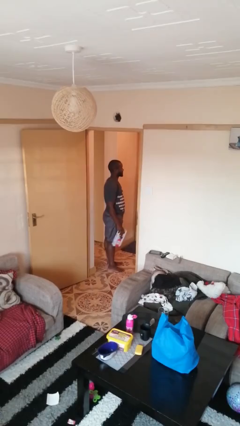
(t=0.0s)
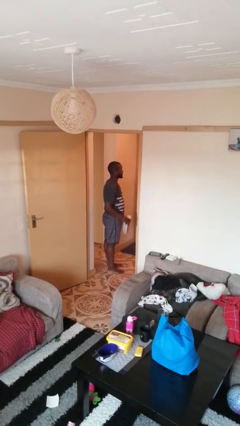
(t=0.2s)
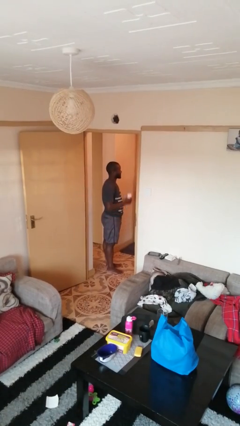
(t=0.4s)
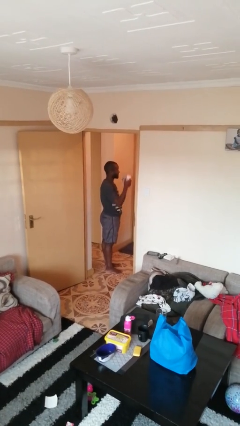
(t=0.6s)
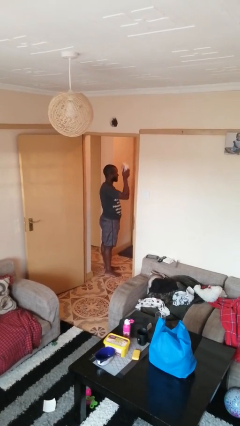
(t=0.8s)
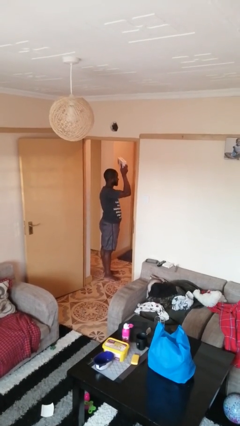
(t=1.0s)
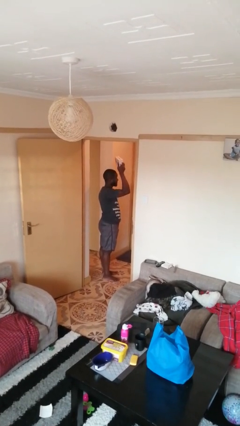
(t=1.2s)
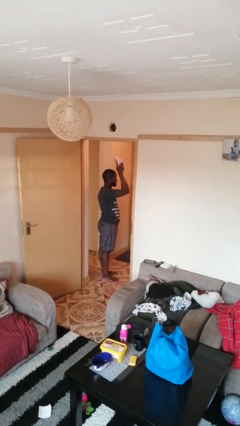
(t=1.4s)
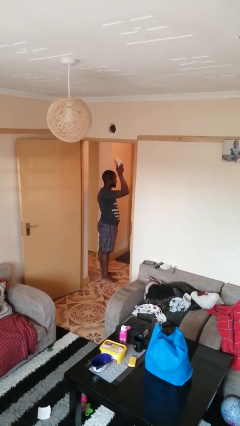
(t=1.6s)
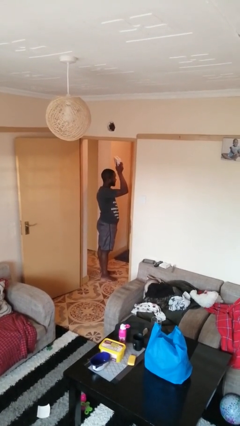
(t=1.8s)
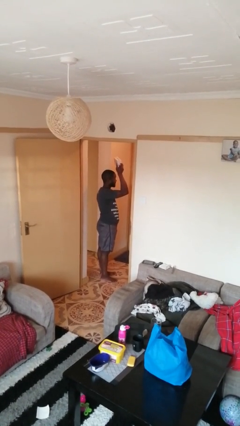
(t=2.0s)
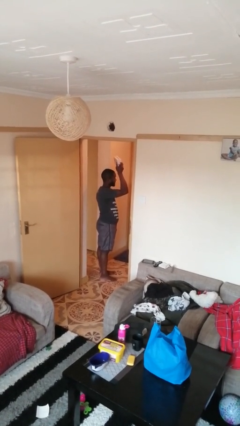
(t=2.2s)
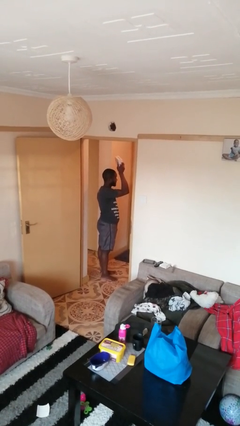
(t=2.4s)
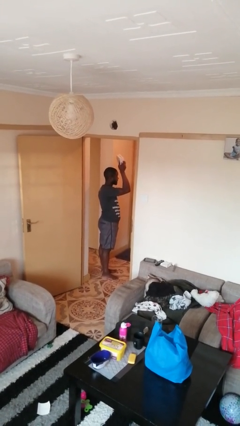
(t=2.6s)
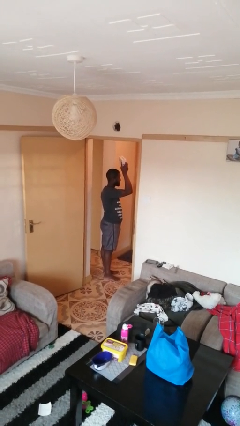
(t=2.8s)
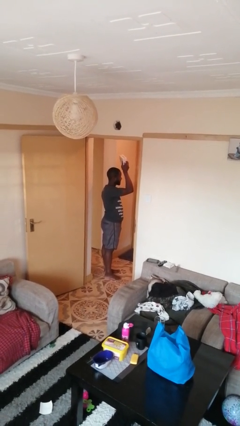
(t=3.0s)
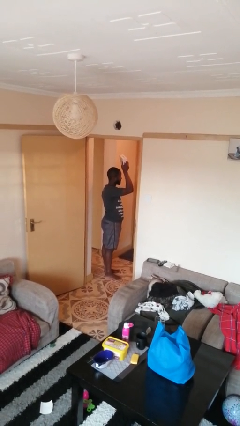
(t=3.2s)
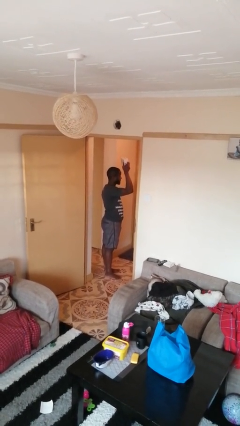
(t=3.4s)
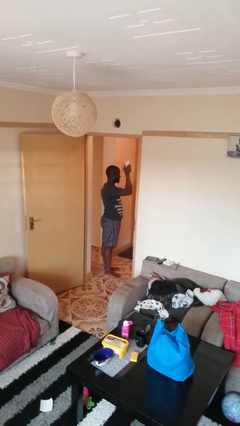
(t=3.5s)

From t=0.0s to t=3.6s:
person holds object above head

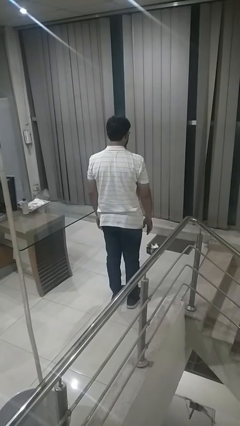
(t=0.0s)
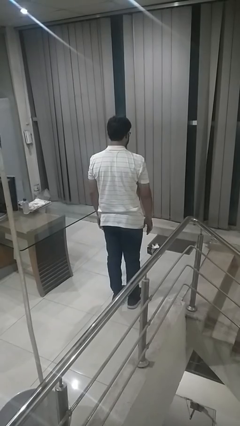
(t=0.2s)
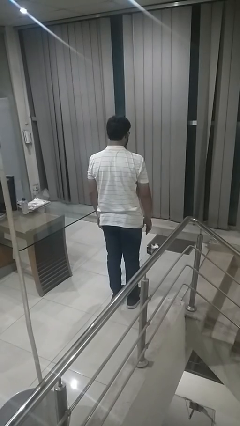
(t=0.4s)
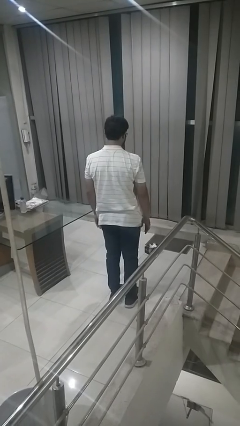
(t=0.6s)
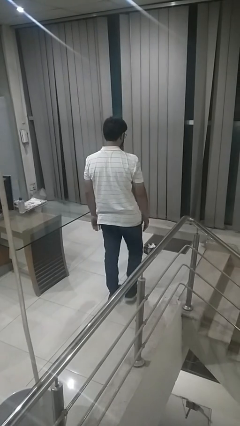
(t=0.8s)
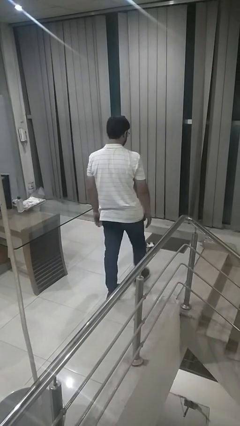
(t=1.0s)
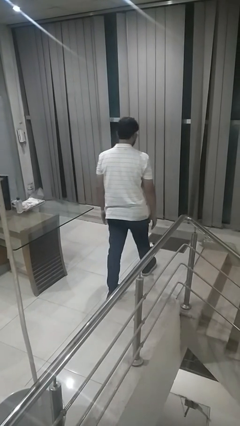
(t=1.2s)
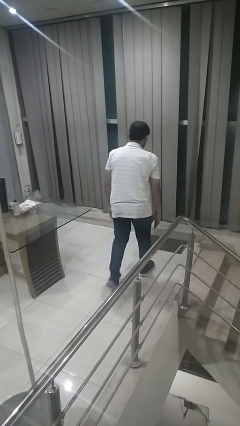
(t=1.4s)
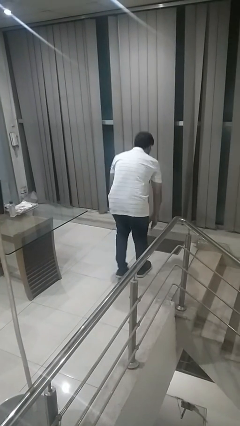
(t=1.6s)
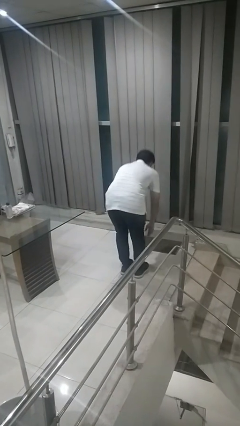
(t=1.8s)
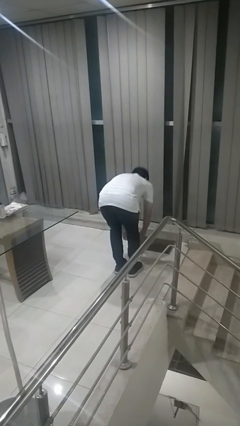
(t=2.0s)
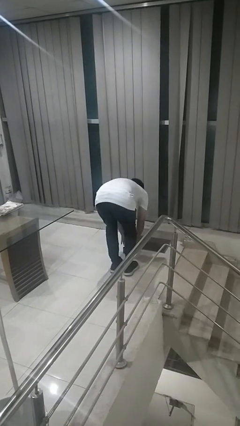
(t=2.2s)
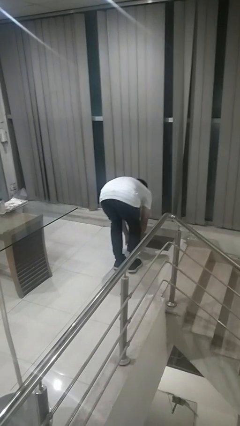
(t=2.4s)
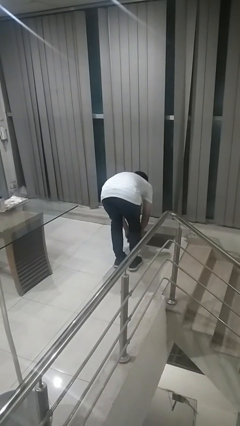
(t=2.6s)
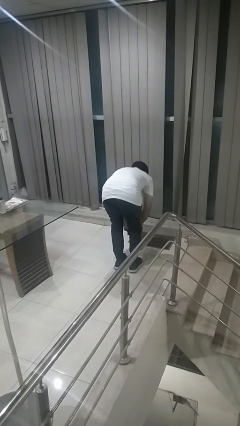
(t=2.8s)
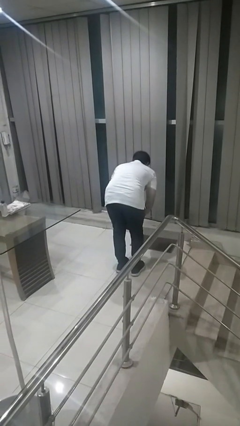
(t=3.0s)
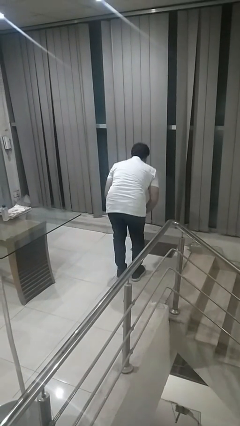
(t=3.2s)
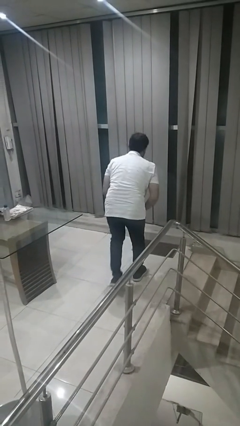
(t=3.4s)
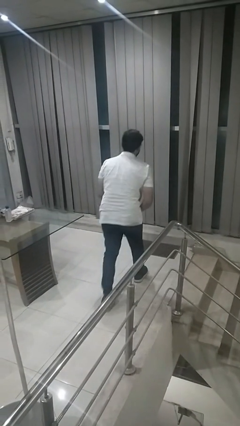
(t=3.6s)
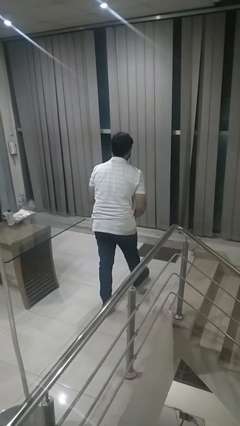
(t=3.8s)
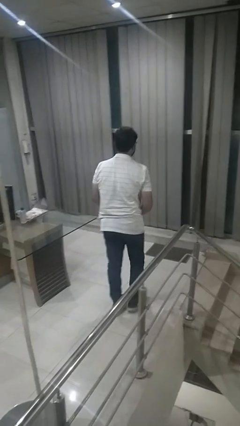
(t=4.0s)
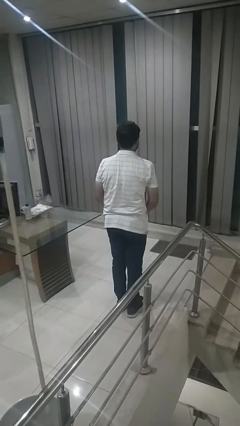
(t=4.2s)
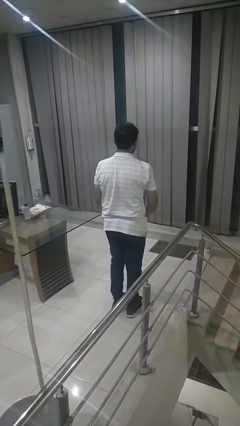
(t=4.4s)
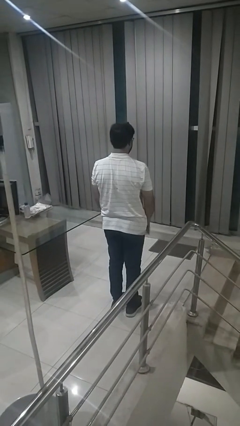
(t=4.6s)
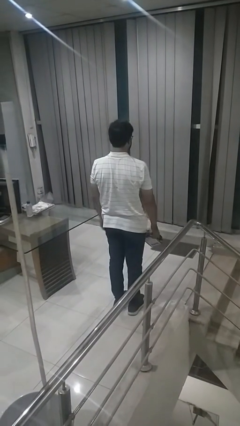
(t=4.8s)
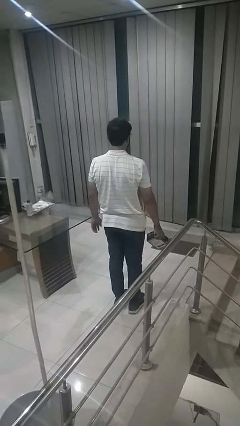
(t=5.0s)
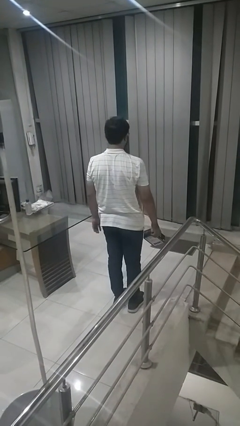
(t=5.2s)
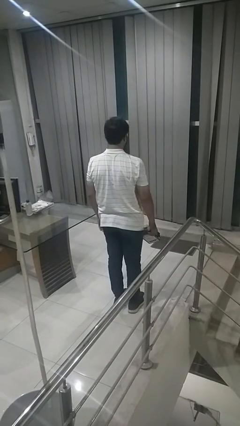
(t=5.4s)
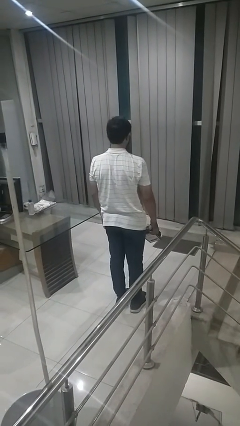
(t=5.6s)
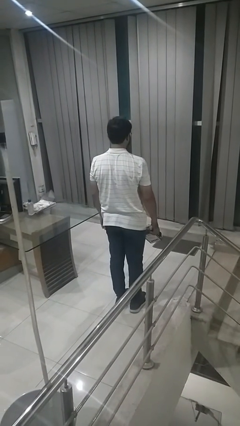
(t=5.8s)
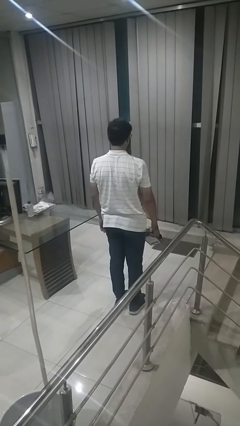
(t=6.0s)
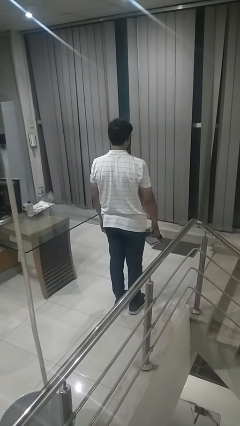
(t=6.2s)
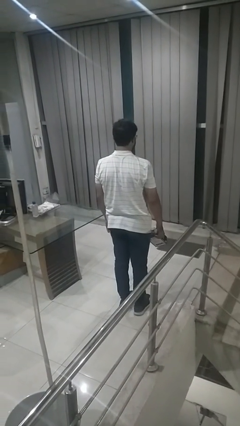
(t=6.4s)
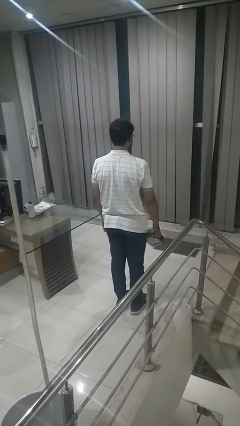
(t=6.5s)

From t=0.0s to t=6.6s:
person picks up object from floor

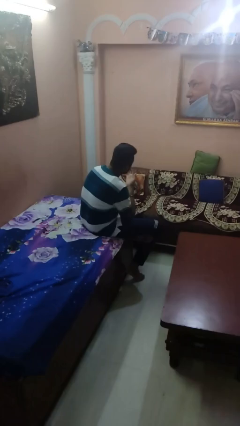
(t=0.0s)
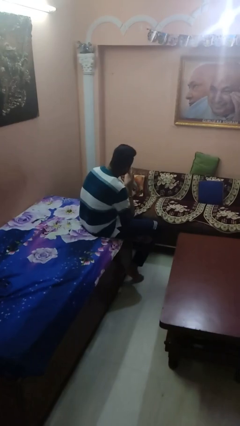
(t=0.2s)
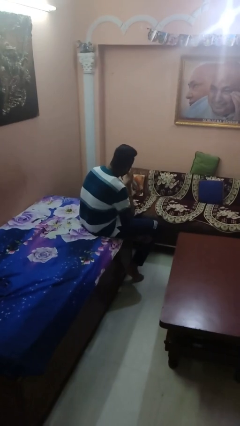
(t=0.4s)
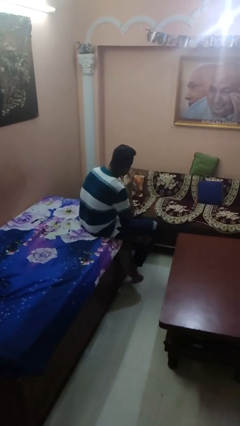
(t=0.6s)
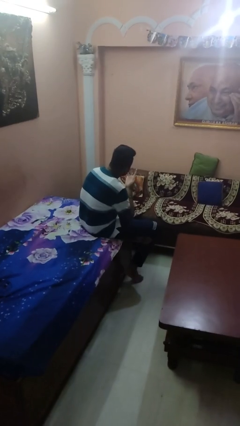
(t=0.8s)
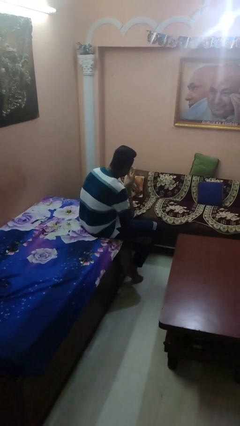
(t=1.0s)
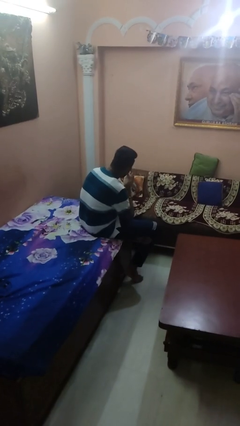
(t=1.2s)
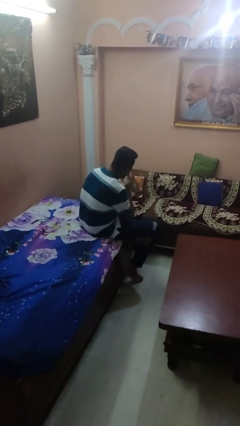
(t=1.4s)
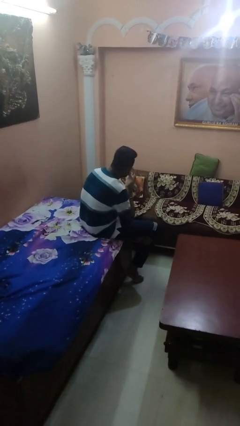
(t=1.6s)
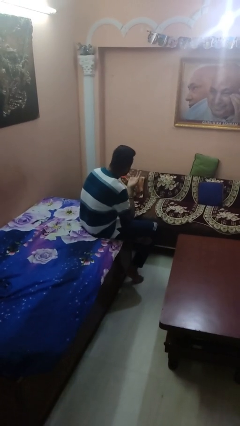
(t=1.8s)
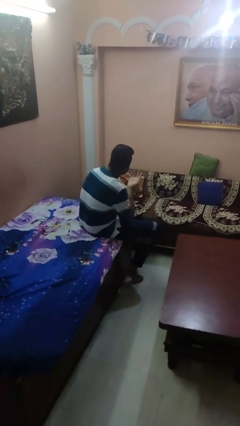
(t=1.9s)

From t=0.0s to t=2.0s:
person licks fingers

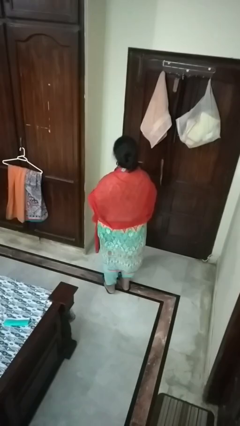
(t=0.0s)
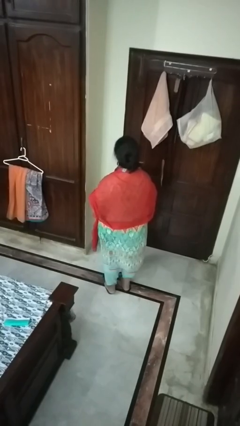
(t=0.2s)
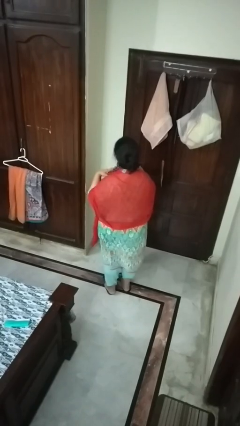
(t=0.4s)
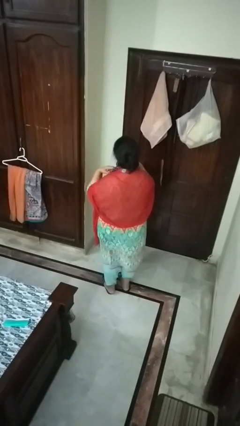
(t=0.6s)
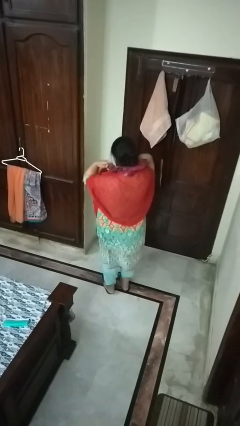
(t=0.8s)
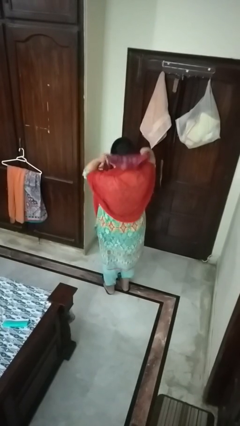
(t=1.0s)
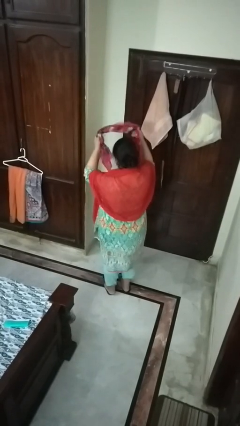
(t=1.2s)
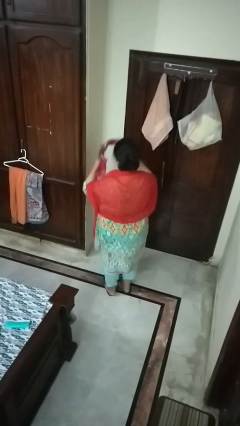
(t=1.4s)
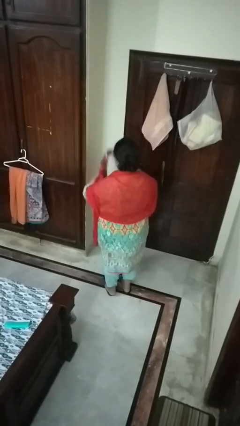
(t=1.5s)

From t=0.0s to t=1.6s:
person takes off scarf

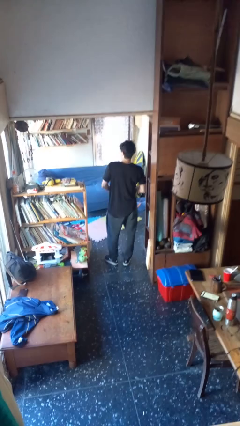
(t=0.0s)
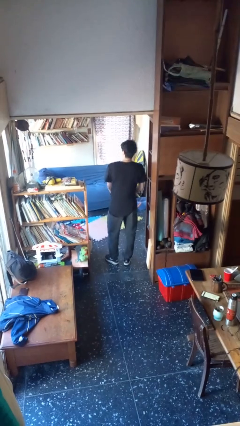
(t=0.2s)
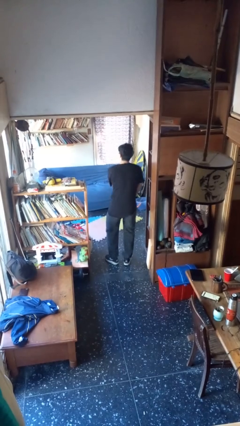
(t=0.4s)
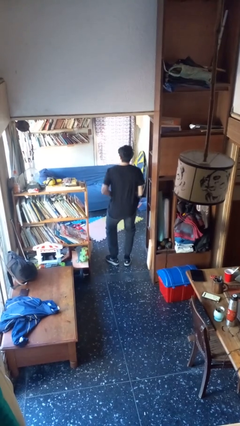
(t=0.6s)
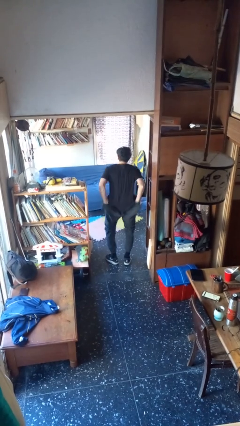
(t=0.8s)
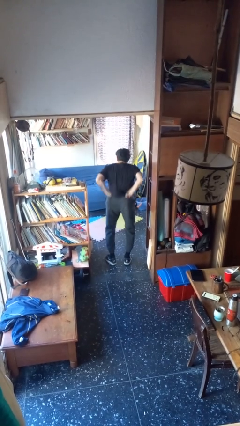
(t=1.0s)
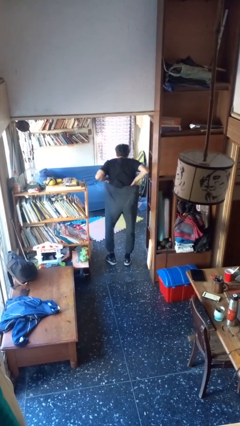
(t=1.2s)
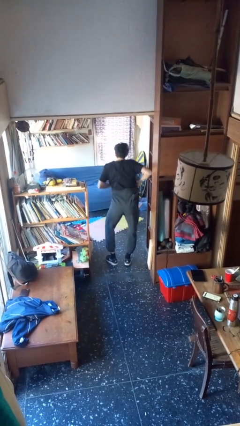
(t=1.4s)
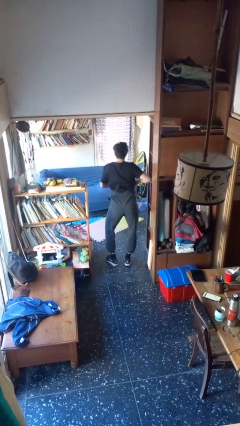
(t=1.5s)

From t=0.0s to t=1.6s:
person tucks in shirt

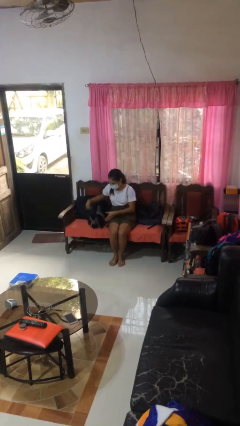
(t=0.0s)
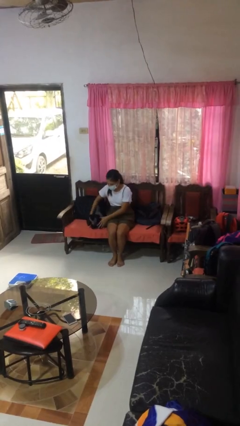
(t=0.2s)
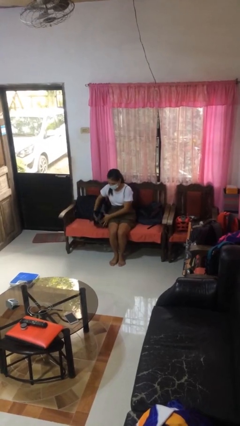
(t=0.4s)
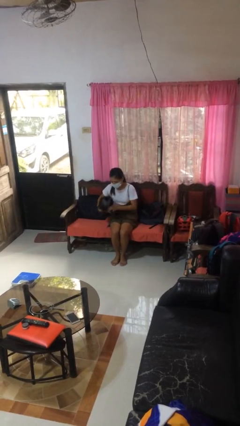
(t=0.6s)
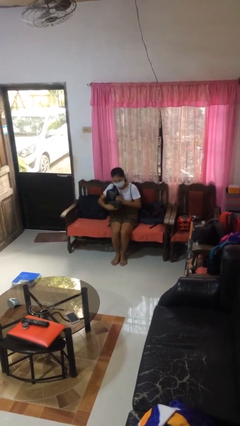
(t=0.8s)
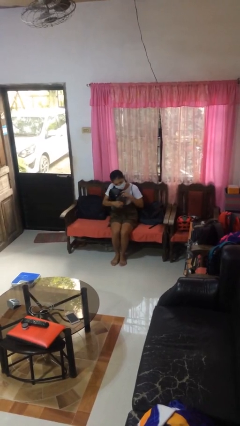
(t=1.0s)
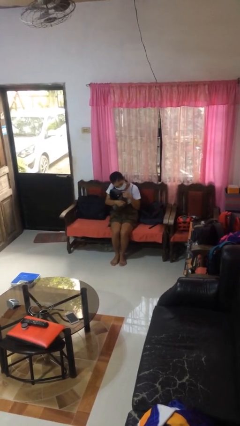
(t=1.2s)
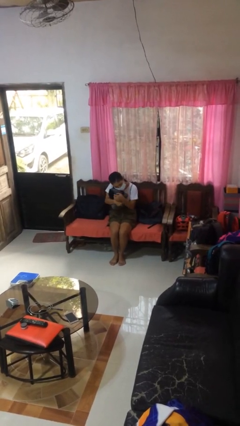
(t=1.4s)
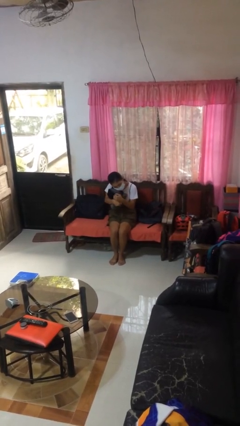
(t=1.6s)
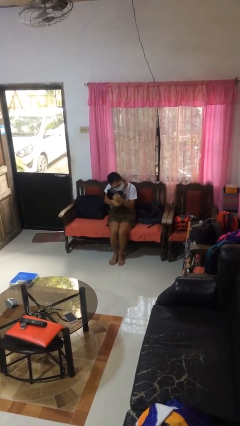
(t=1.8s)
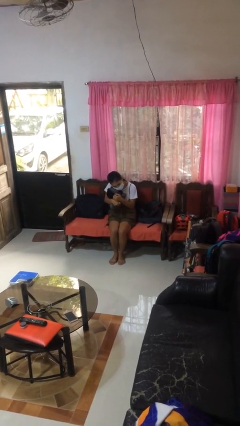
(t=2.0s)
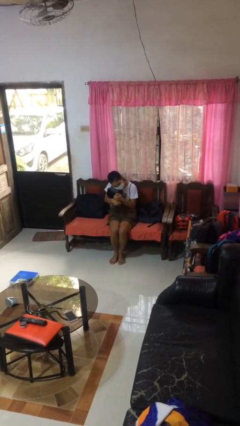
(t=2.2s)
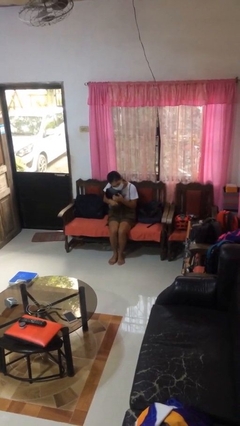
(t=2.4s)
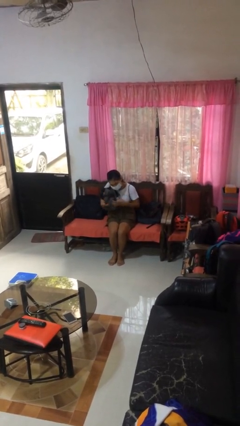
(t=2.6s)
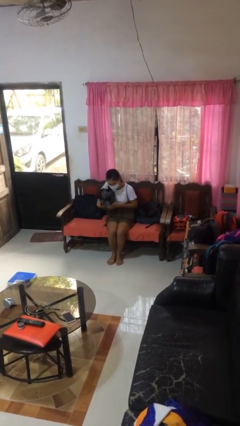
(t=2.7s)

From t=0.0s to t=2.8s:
person hugs stuffed animal
